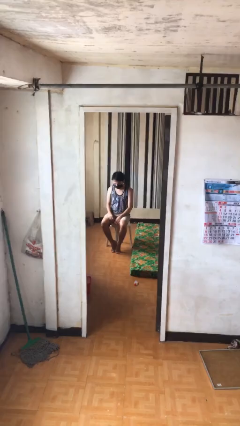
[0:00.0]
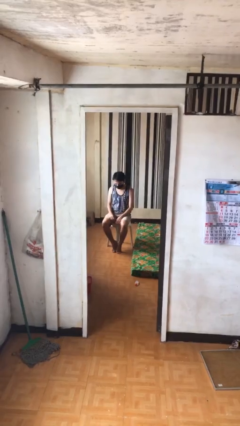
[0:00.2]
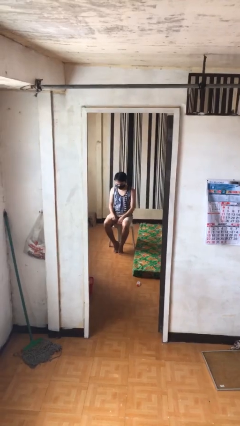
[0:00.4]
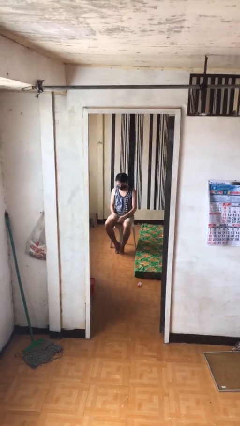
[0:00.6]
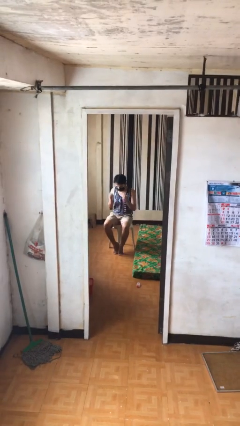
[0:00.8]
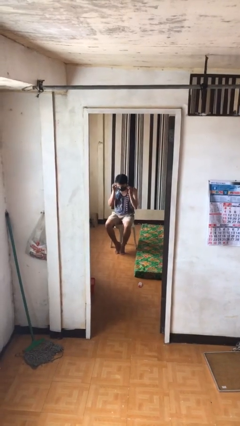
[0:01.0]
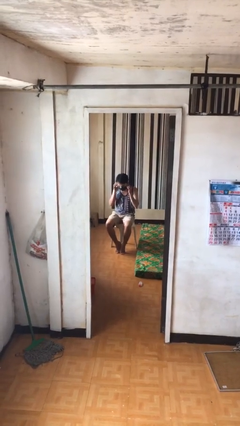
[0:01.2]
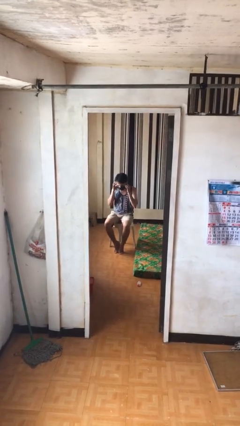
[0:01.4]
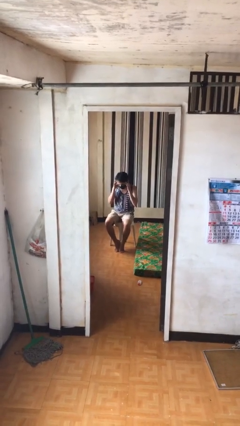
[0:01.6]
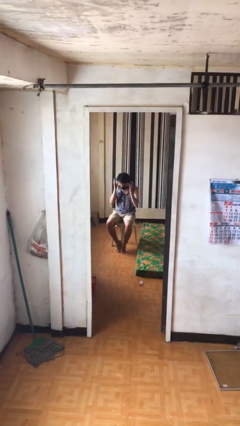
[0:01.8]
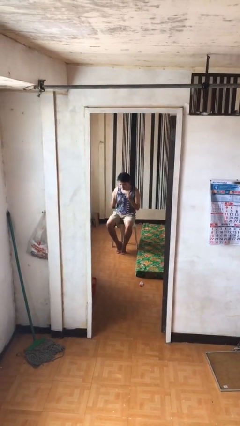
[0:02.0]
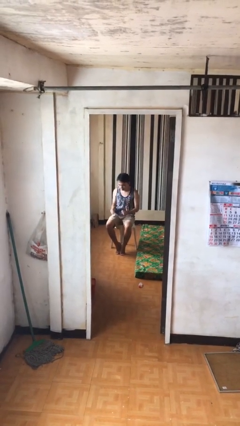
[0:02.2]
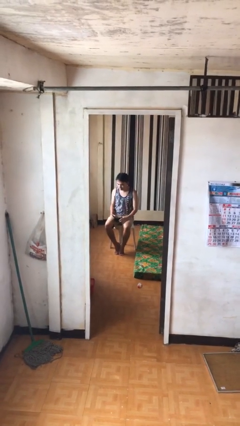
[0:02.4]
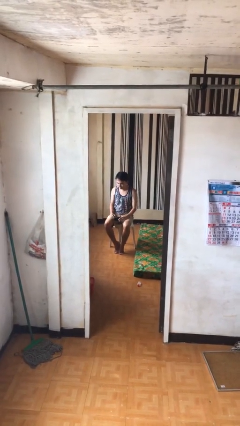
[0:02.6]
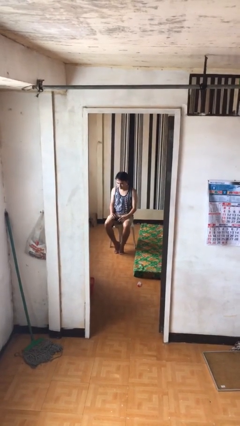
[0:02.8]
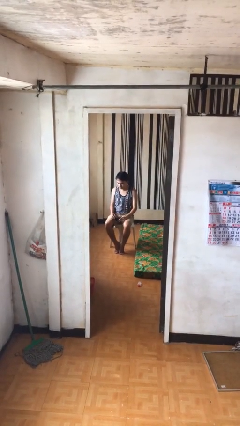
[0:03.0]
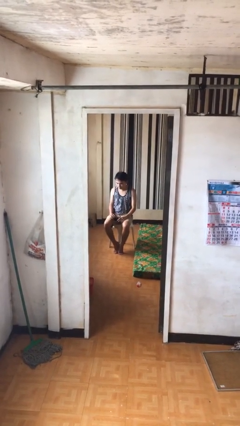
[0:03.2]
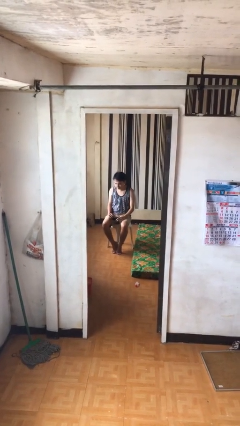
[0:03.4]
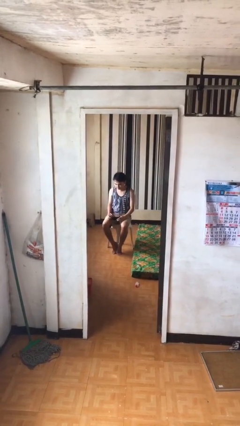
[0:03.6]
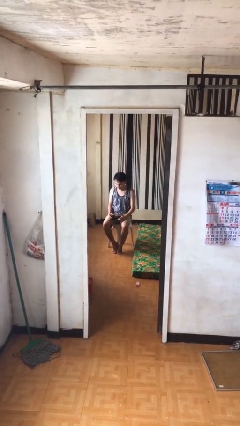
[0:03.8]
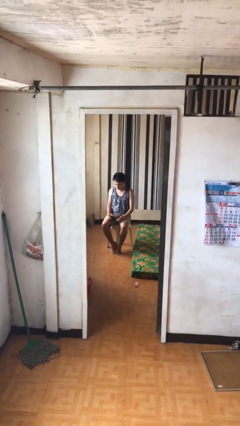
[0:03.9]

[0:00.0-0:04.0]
person takes off facemask

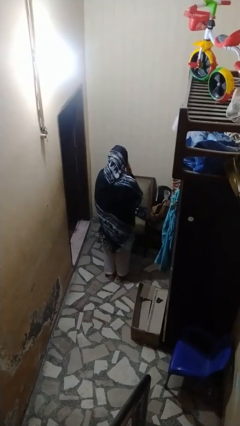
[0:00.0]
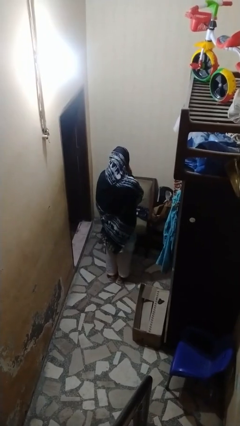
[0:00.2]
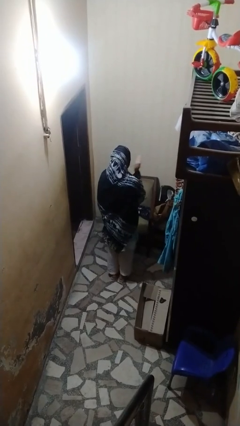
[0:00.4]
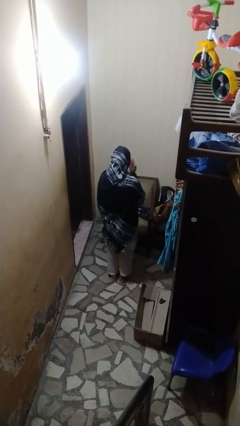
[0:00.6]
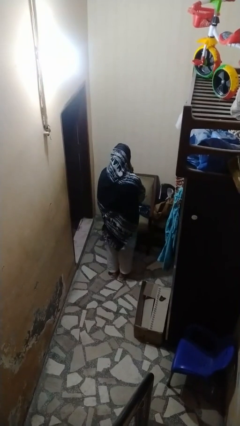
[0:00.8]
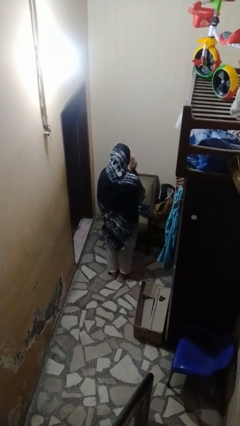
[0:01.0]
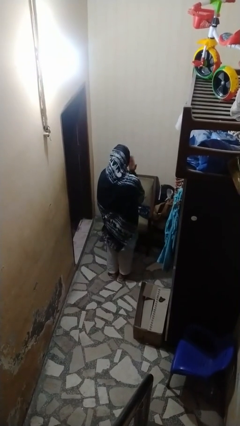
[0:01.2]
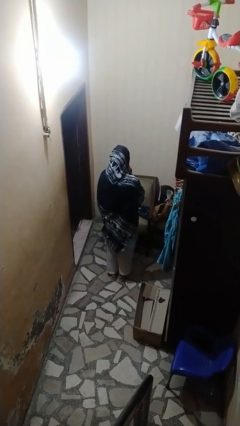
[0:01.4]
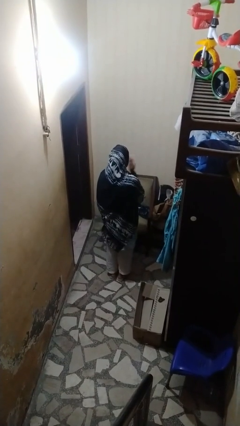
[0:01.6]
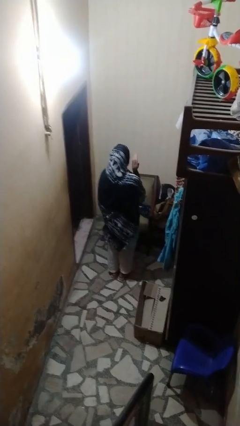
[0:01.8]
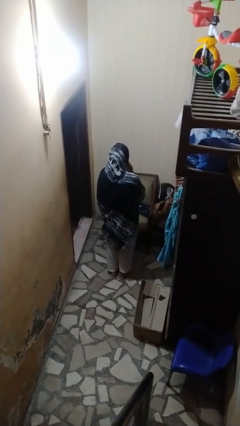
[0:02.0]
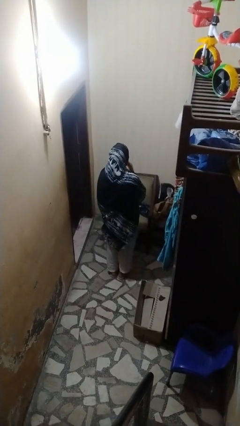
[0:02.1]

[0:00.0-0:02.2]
person gestures blow kiss

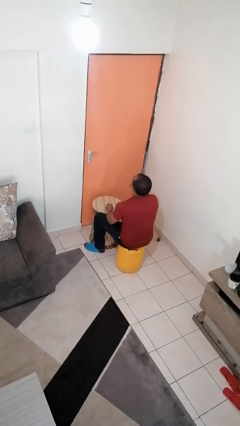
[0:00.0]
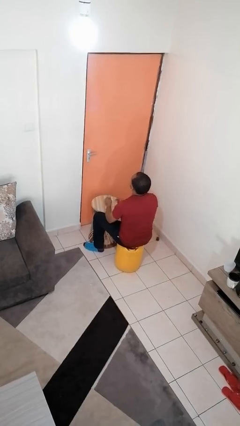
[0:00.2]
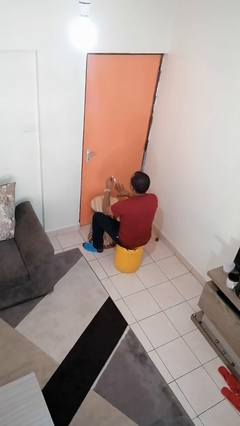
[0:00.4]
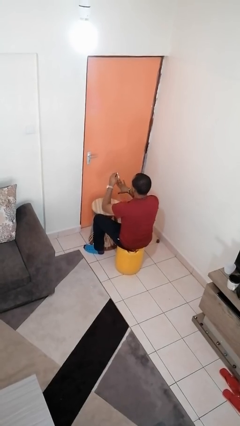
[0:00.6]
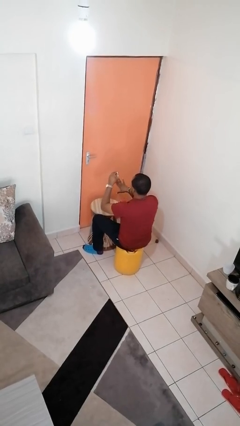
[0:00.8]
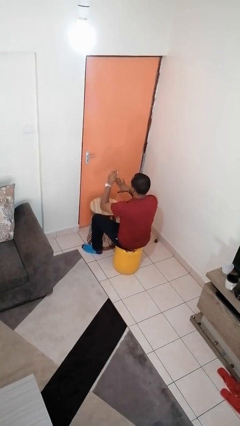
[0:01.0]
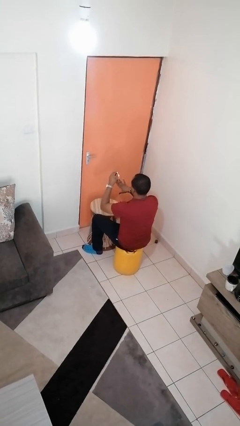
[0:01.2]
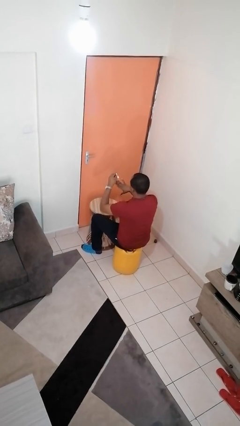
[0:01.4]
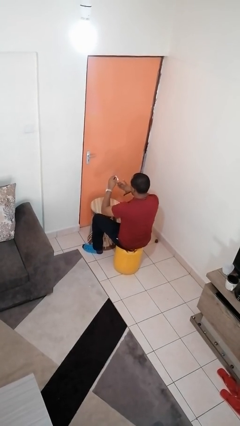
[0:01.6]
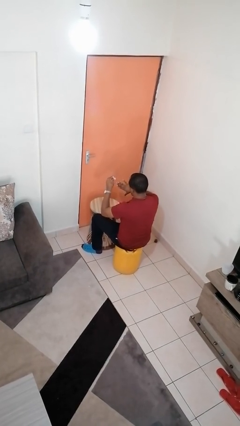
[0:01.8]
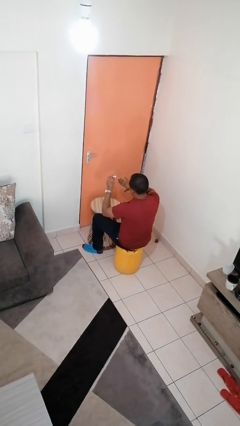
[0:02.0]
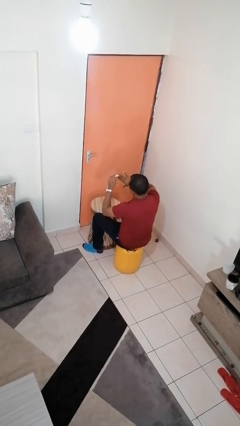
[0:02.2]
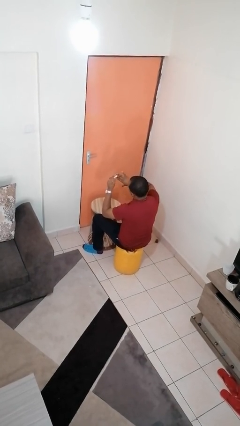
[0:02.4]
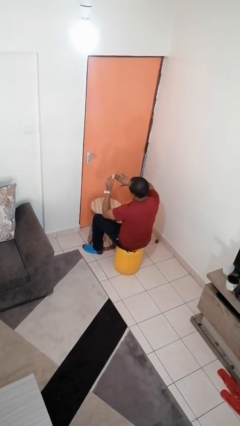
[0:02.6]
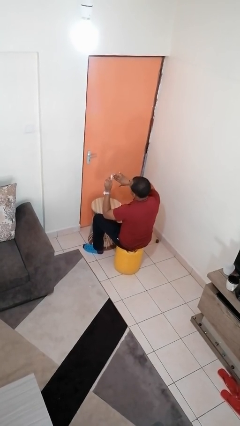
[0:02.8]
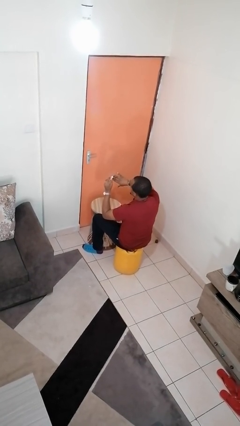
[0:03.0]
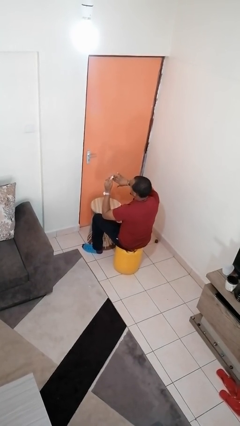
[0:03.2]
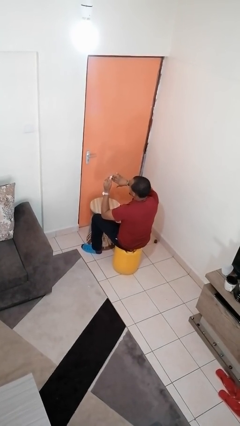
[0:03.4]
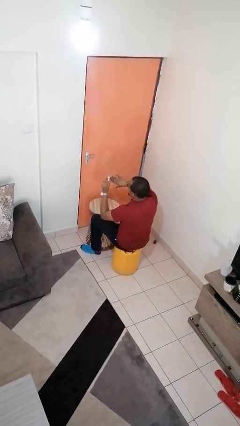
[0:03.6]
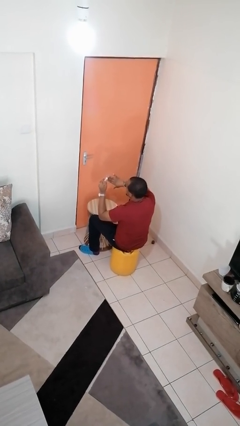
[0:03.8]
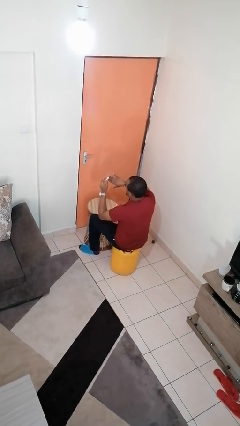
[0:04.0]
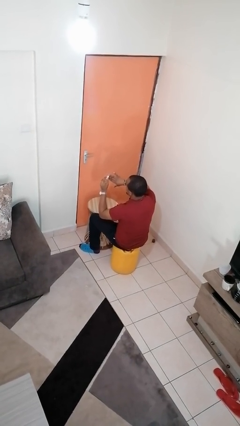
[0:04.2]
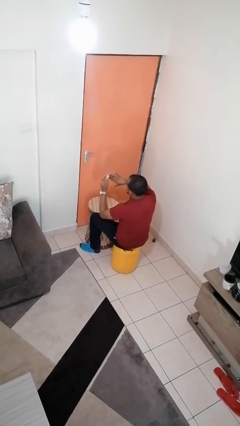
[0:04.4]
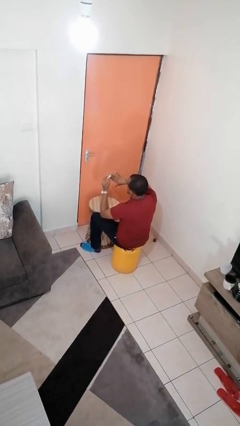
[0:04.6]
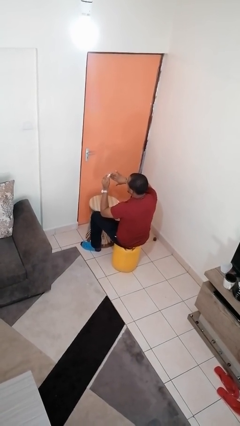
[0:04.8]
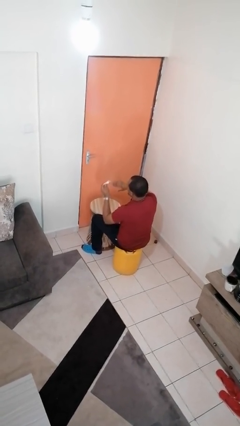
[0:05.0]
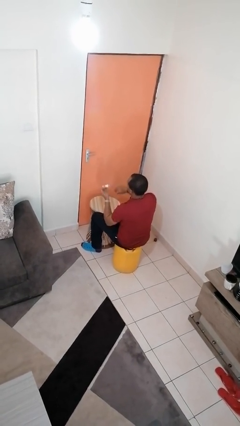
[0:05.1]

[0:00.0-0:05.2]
person paints fingernails

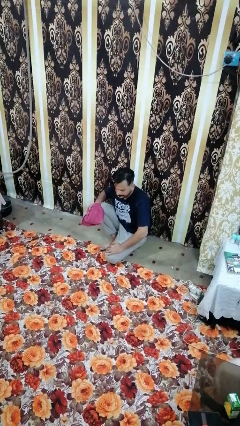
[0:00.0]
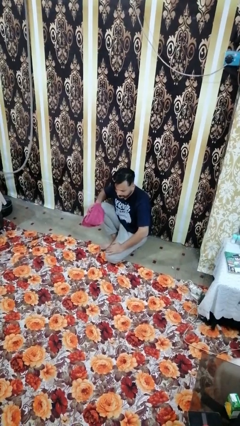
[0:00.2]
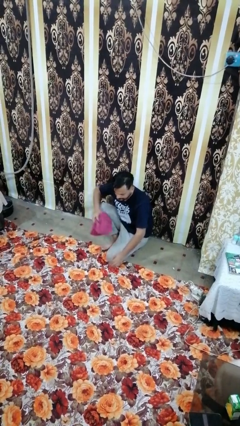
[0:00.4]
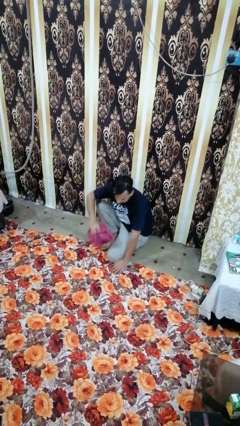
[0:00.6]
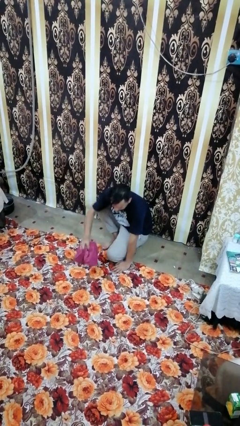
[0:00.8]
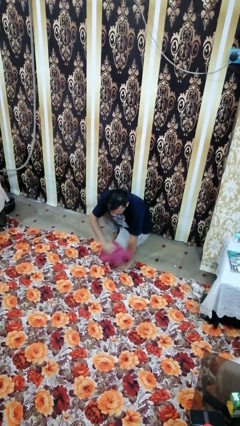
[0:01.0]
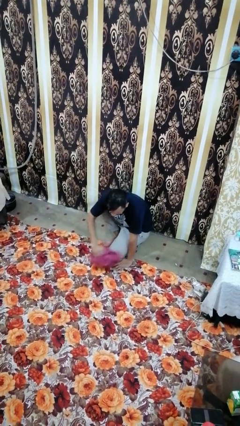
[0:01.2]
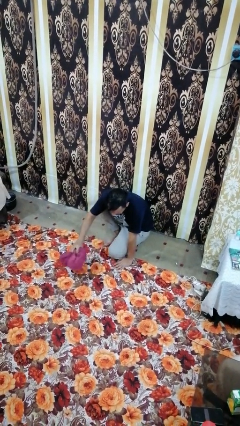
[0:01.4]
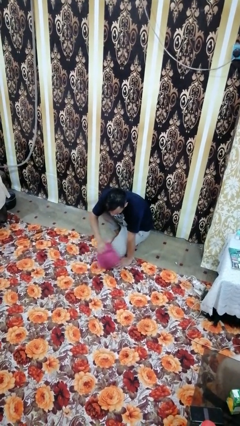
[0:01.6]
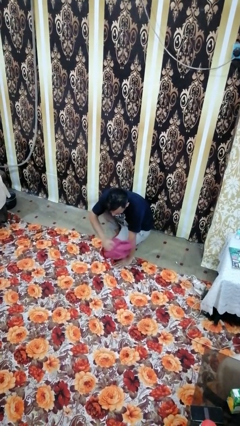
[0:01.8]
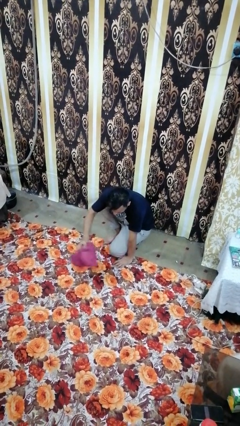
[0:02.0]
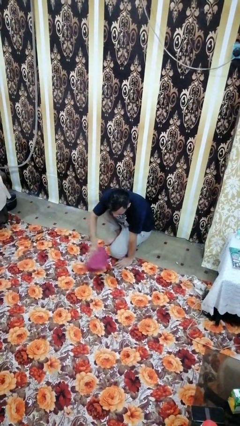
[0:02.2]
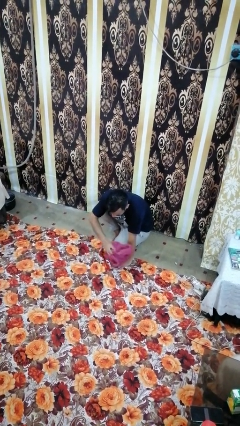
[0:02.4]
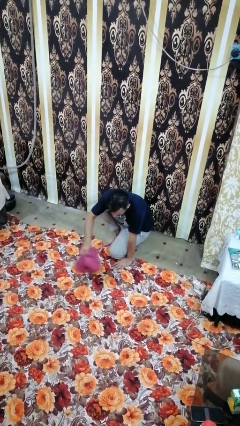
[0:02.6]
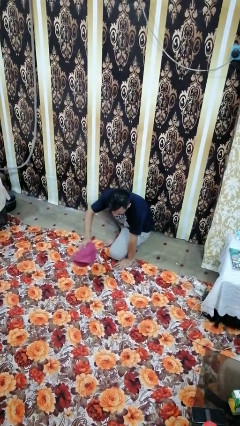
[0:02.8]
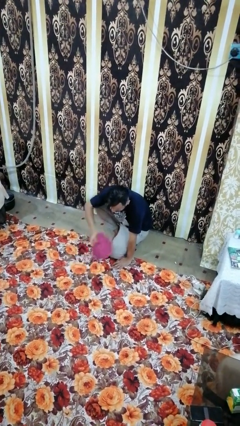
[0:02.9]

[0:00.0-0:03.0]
person mops

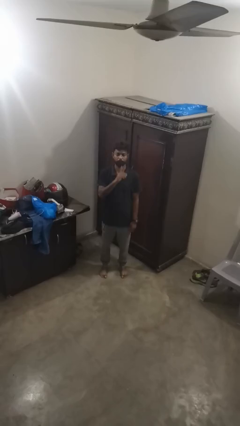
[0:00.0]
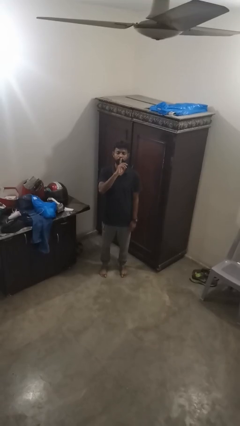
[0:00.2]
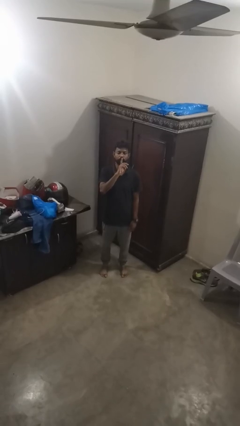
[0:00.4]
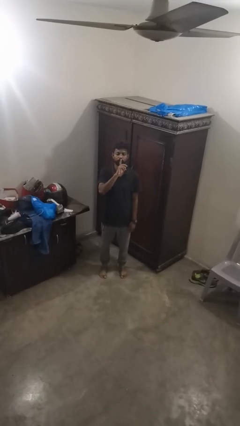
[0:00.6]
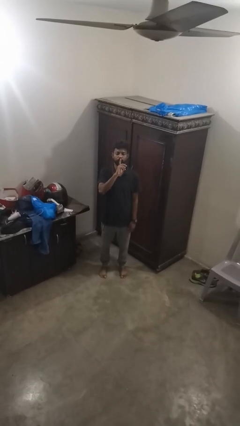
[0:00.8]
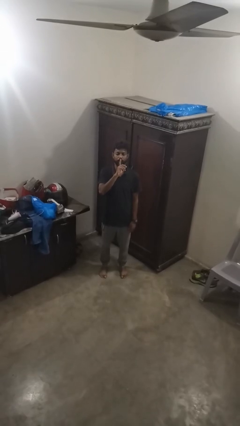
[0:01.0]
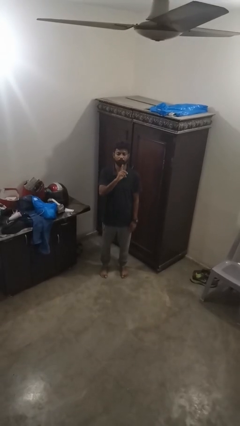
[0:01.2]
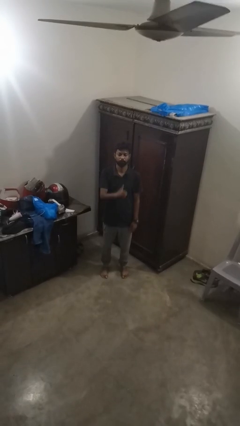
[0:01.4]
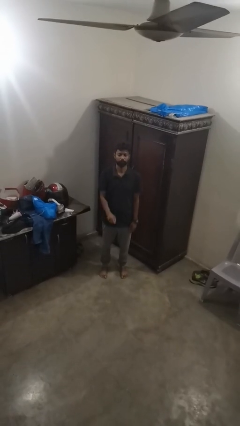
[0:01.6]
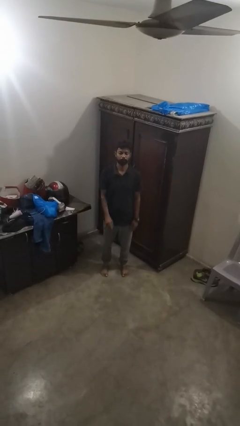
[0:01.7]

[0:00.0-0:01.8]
person gestures be quiet

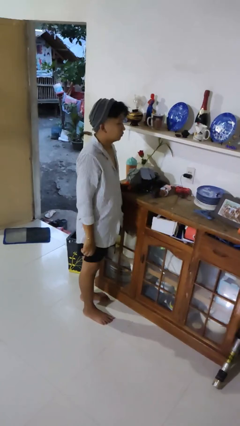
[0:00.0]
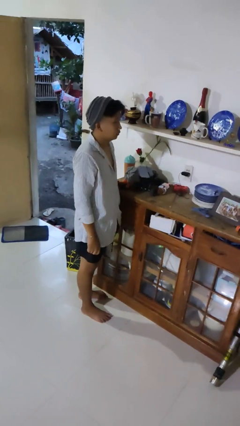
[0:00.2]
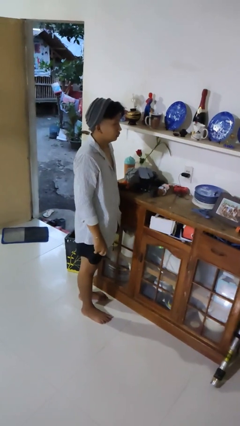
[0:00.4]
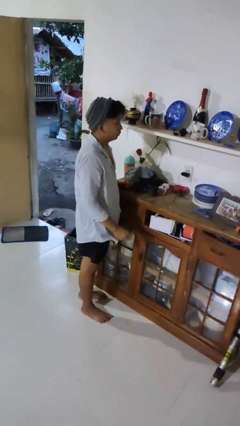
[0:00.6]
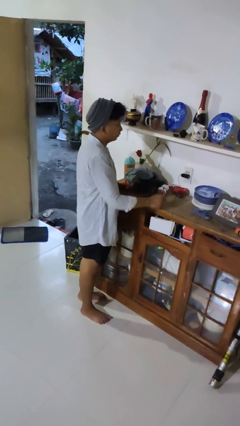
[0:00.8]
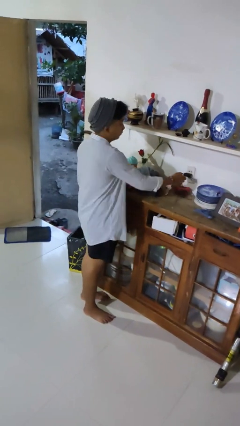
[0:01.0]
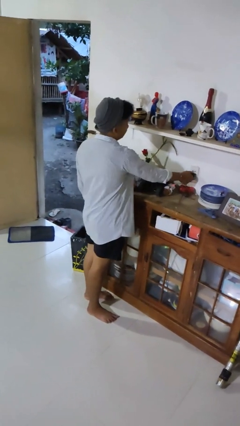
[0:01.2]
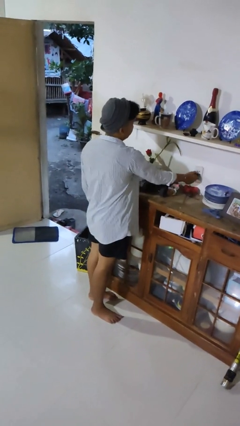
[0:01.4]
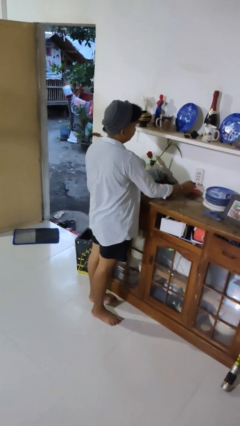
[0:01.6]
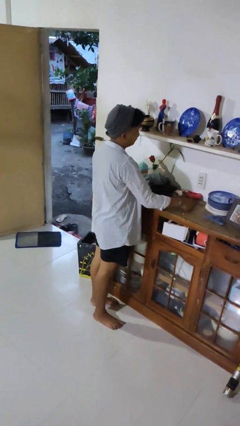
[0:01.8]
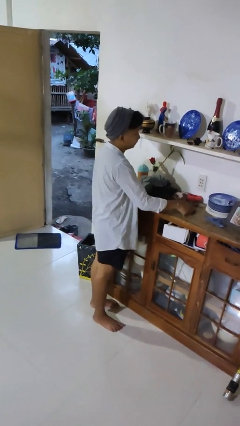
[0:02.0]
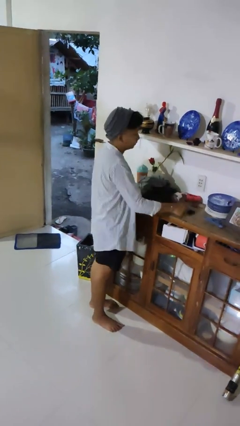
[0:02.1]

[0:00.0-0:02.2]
person unplugs from electrical socket
